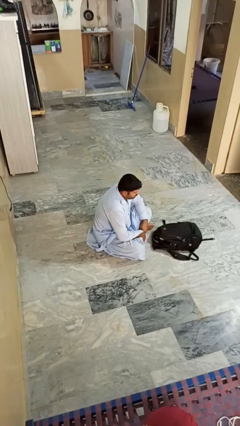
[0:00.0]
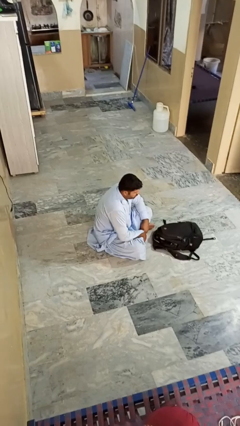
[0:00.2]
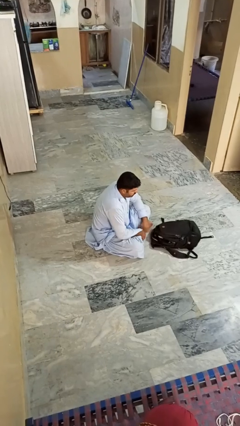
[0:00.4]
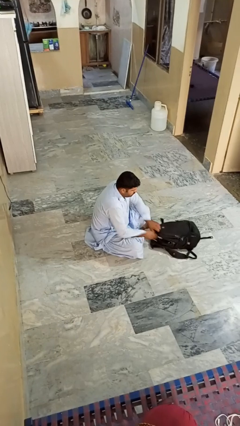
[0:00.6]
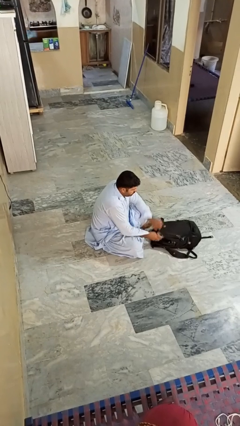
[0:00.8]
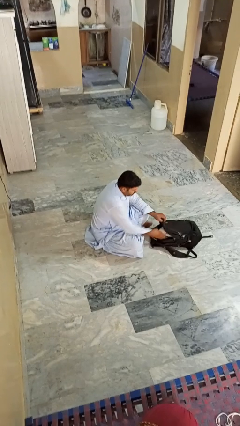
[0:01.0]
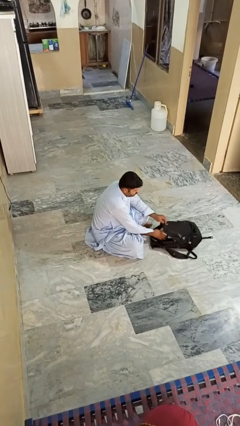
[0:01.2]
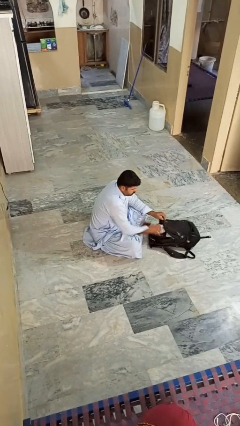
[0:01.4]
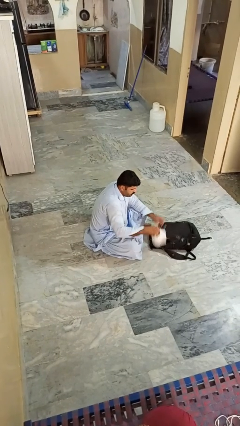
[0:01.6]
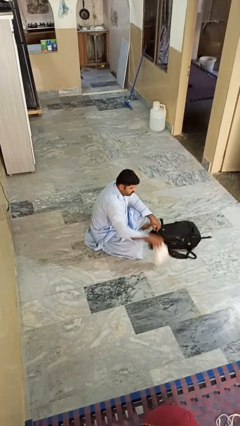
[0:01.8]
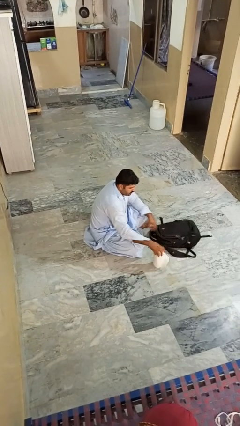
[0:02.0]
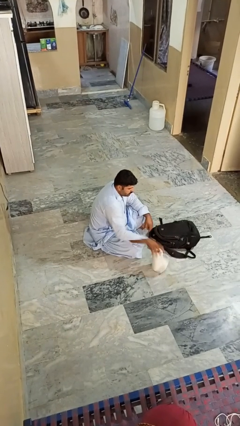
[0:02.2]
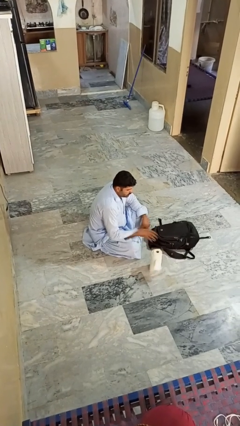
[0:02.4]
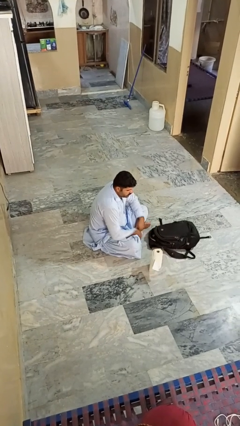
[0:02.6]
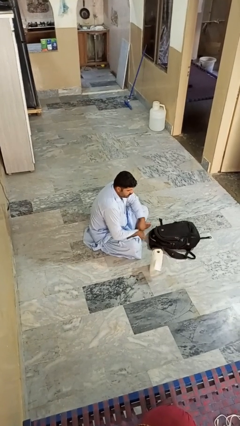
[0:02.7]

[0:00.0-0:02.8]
person takes object from bag

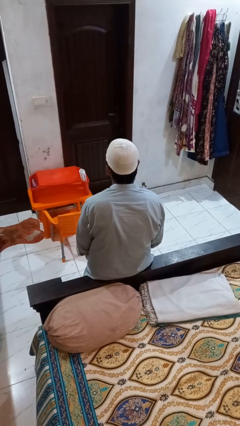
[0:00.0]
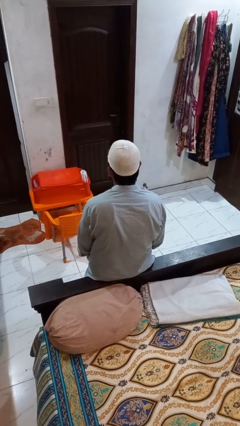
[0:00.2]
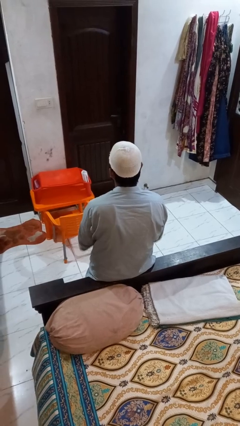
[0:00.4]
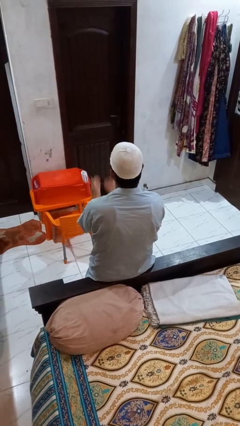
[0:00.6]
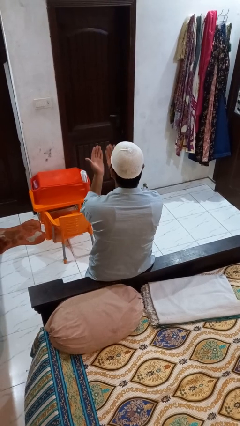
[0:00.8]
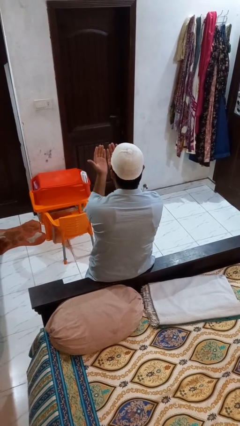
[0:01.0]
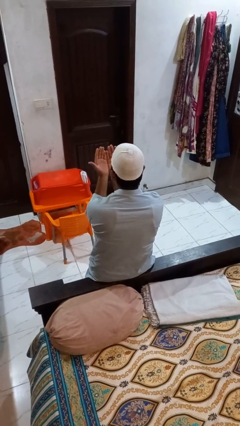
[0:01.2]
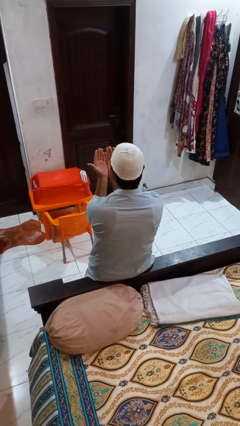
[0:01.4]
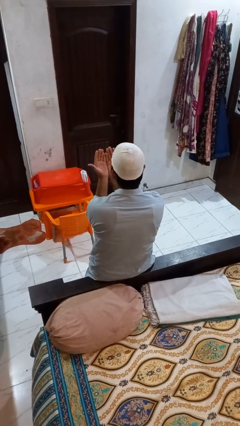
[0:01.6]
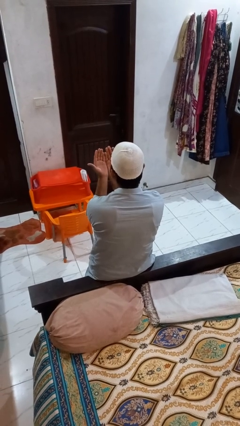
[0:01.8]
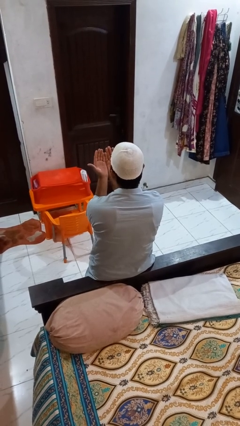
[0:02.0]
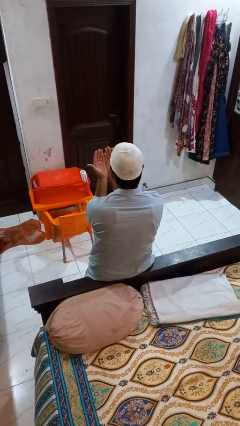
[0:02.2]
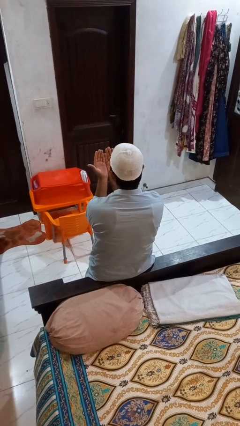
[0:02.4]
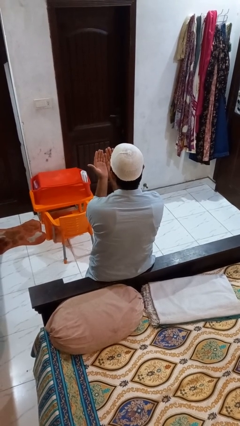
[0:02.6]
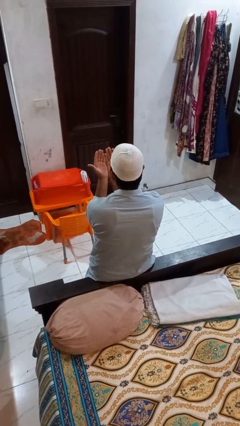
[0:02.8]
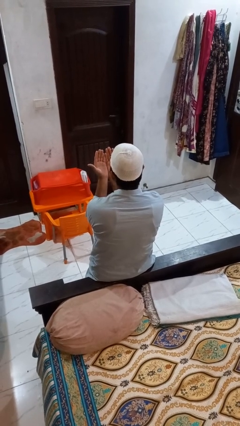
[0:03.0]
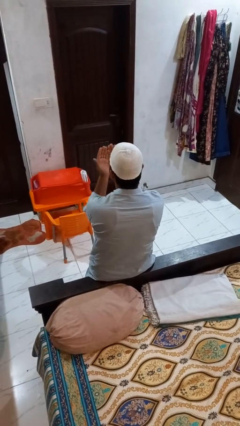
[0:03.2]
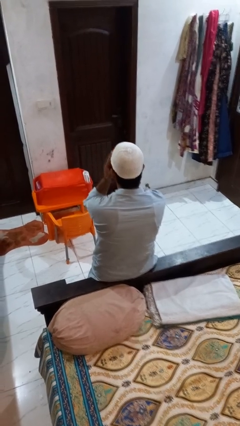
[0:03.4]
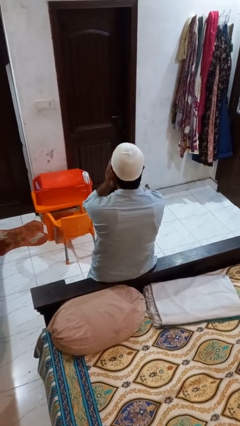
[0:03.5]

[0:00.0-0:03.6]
person prays

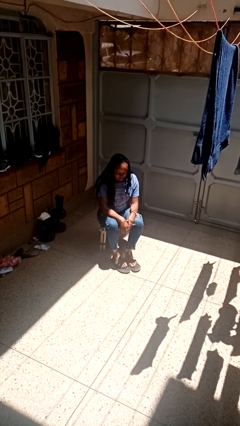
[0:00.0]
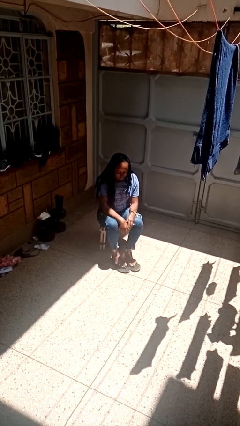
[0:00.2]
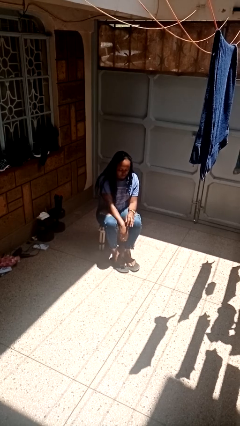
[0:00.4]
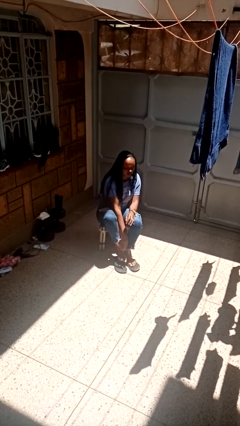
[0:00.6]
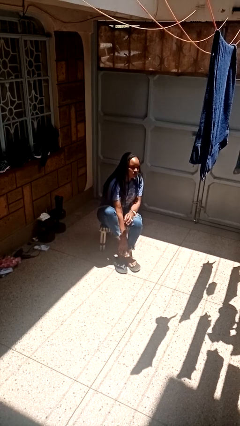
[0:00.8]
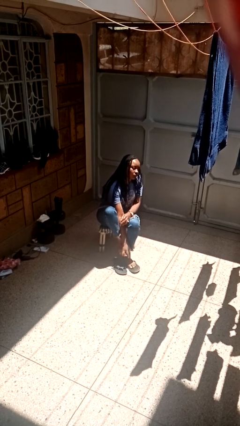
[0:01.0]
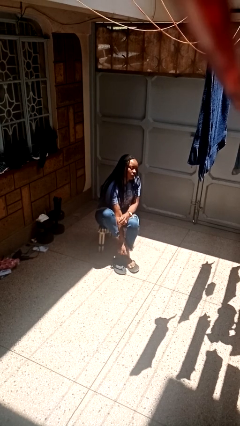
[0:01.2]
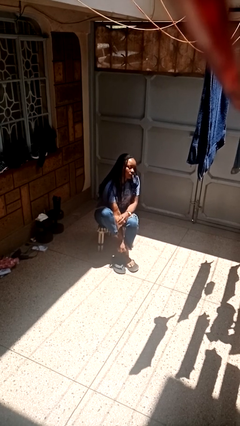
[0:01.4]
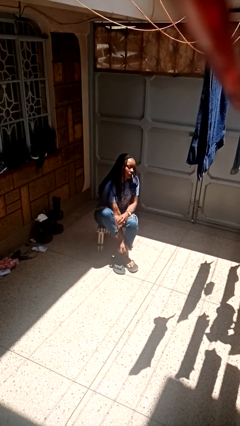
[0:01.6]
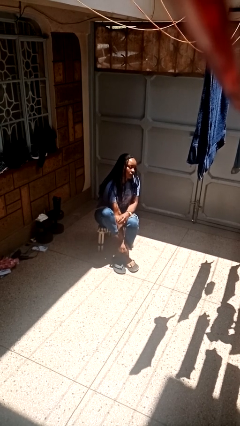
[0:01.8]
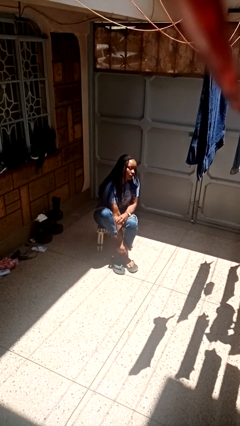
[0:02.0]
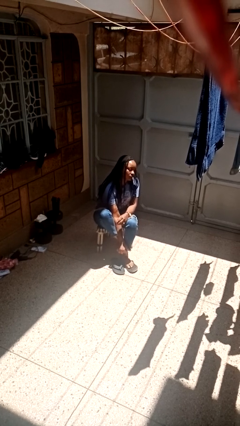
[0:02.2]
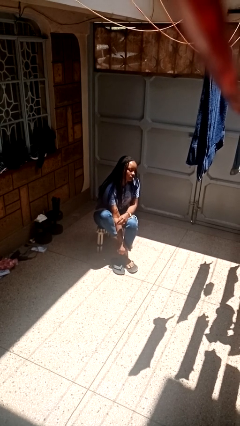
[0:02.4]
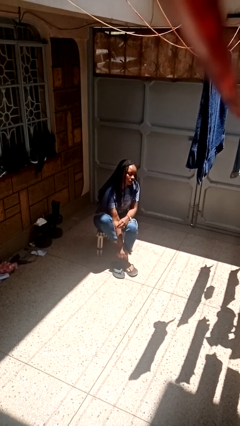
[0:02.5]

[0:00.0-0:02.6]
person rubs foot

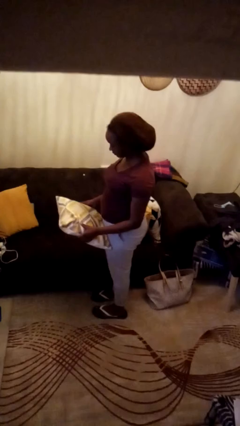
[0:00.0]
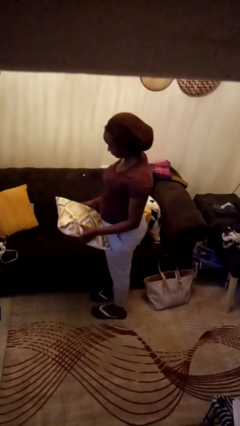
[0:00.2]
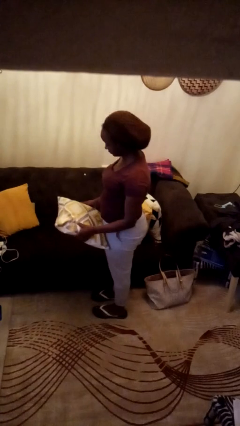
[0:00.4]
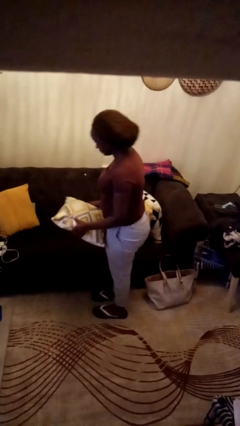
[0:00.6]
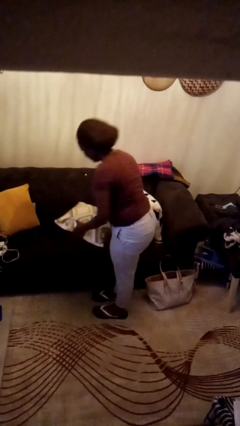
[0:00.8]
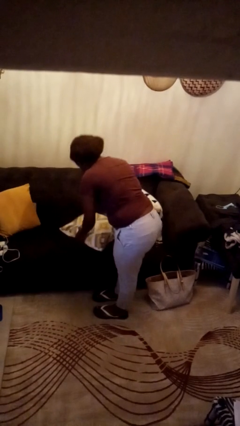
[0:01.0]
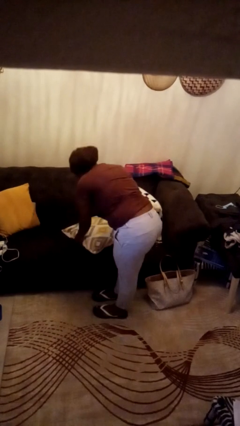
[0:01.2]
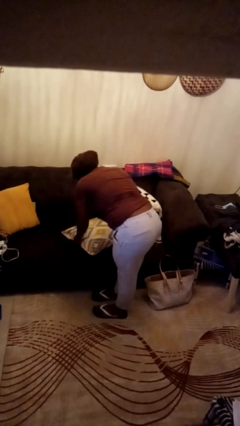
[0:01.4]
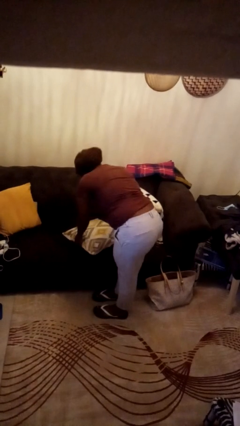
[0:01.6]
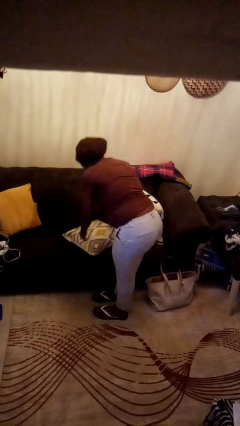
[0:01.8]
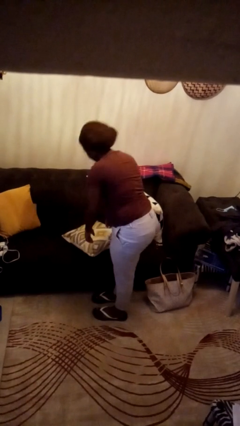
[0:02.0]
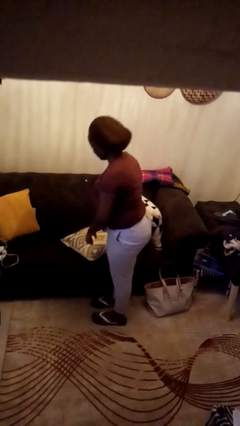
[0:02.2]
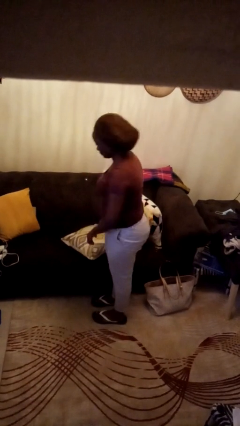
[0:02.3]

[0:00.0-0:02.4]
person puts down object on couch

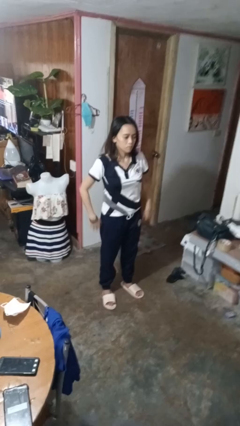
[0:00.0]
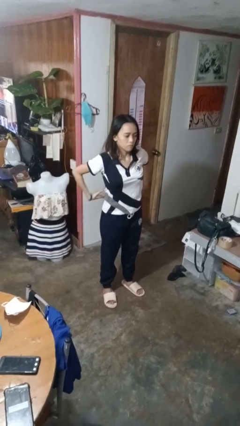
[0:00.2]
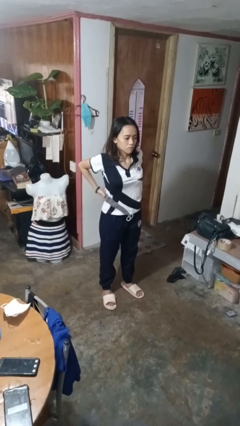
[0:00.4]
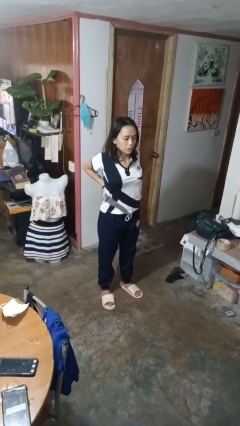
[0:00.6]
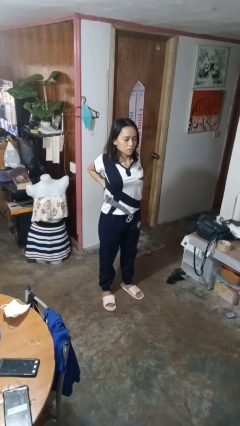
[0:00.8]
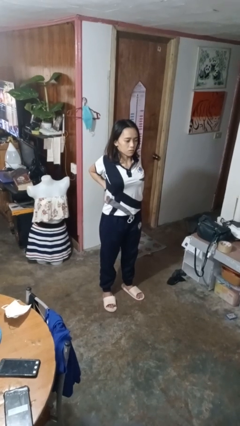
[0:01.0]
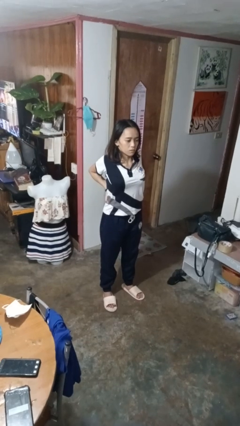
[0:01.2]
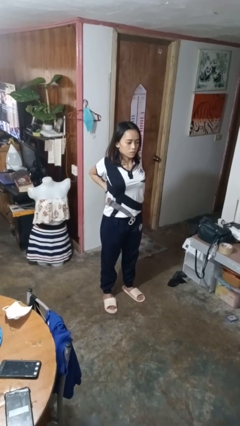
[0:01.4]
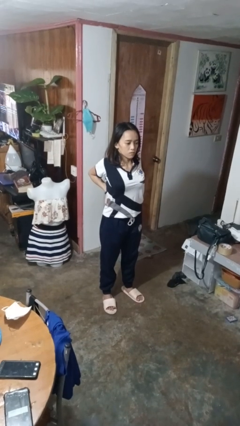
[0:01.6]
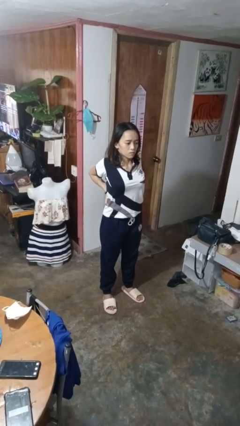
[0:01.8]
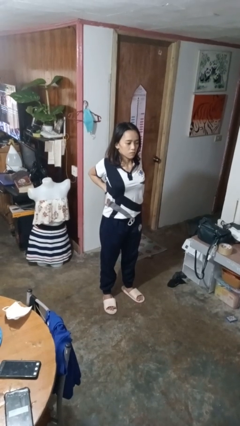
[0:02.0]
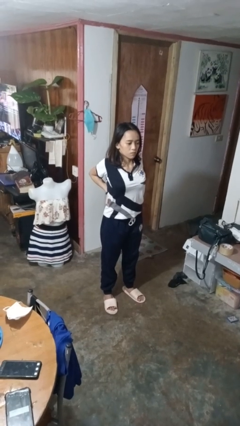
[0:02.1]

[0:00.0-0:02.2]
person stretches back

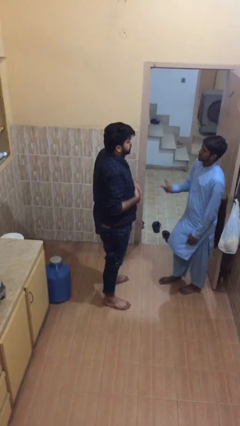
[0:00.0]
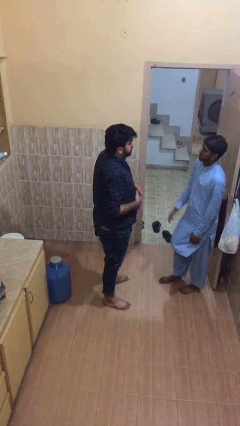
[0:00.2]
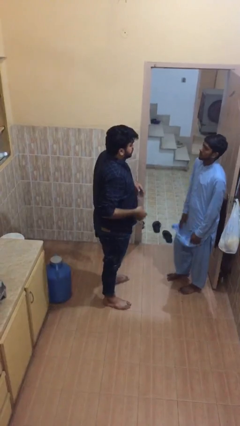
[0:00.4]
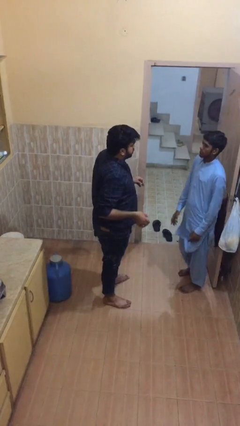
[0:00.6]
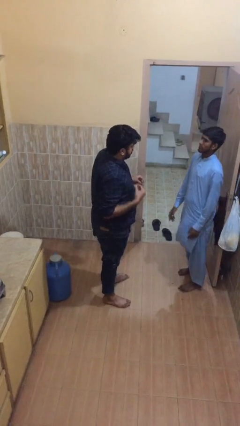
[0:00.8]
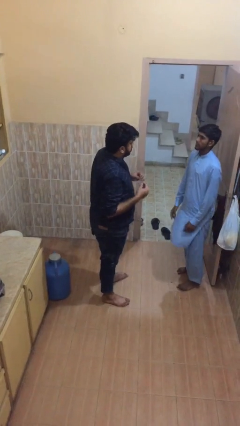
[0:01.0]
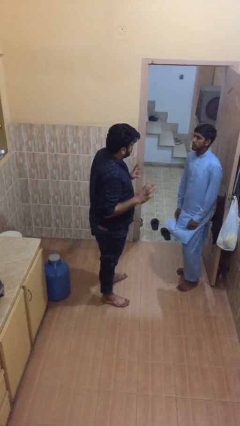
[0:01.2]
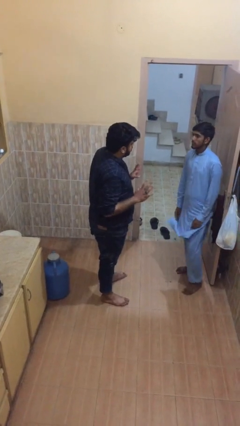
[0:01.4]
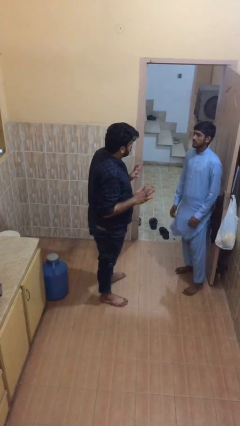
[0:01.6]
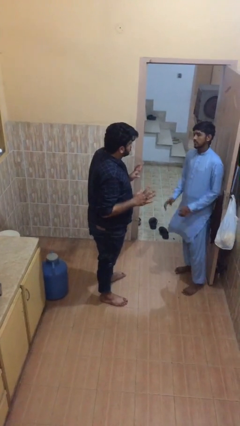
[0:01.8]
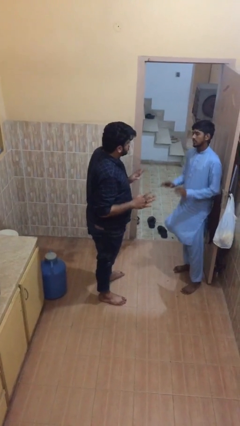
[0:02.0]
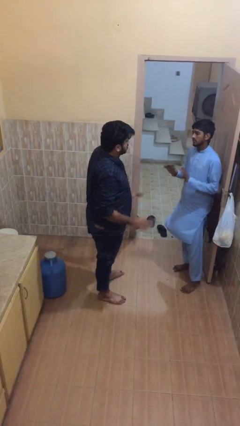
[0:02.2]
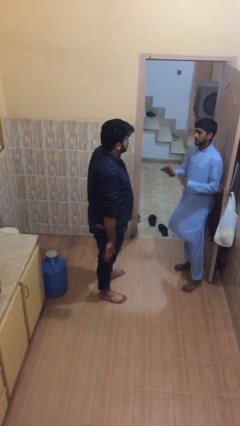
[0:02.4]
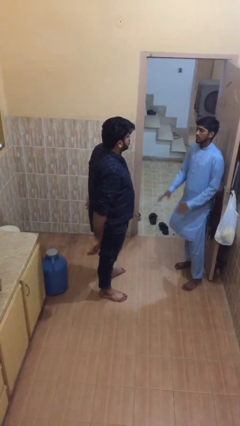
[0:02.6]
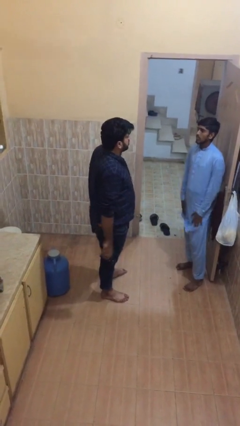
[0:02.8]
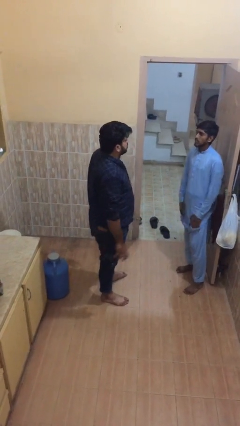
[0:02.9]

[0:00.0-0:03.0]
person talks to person

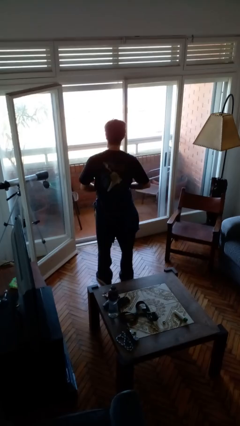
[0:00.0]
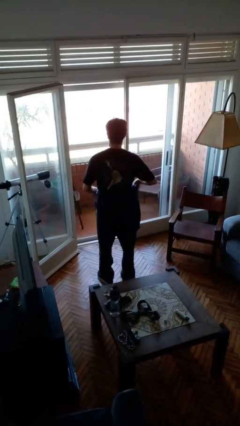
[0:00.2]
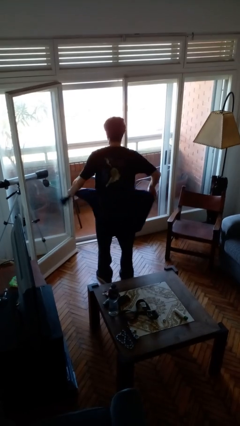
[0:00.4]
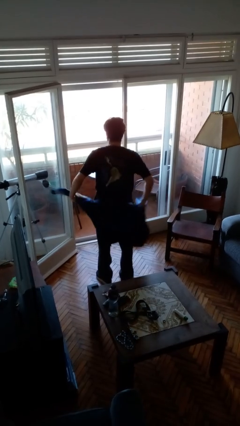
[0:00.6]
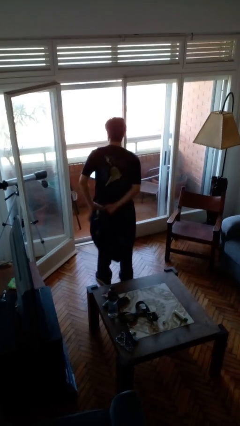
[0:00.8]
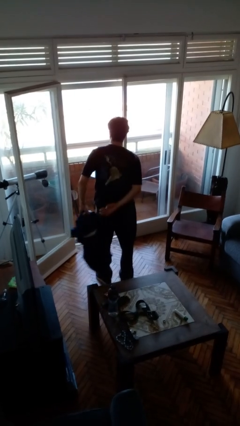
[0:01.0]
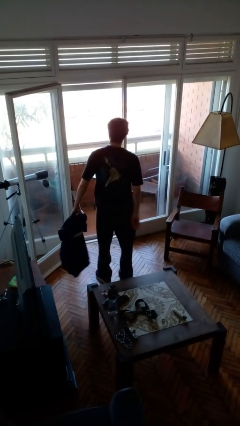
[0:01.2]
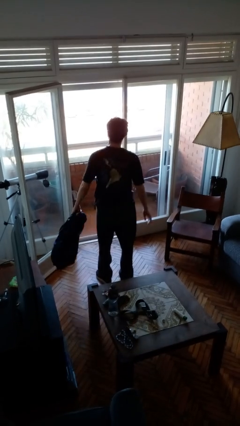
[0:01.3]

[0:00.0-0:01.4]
person unties jacket around waist
